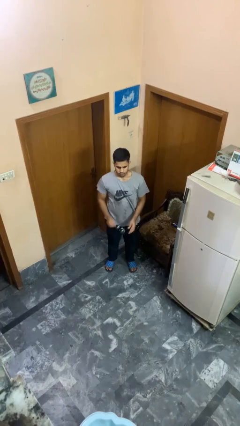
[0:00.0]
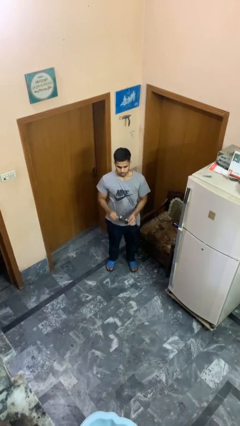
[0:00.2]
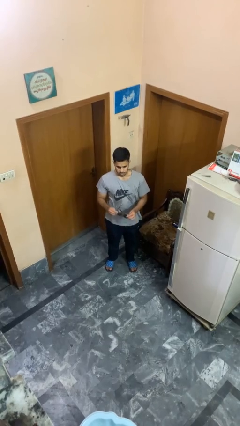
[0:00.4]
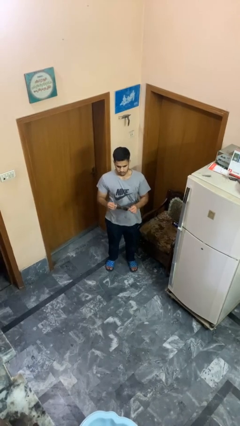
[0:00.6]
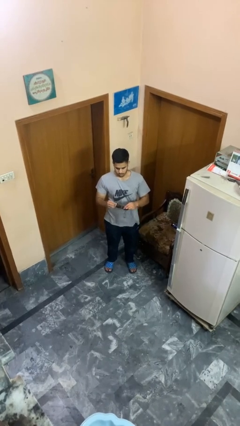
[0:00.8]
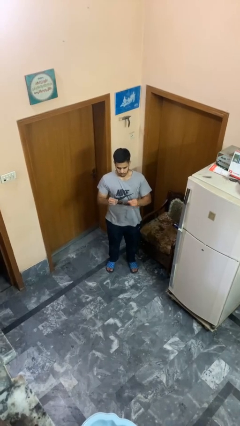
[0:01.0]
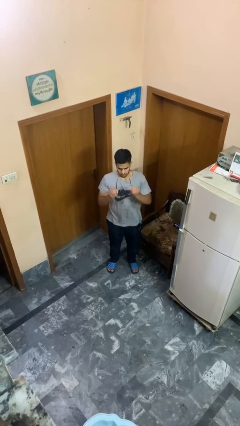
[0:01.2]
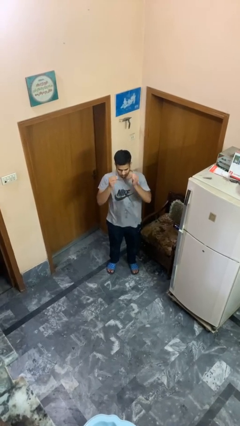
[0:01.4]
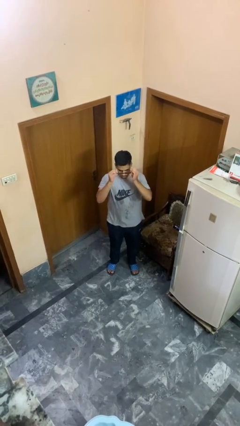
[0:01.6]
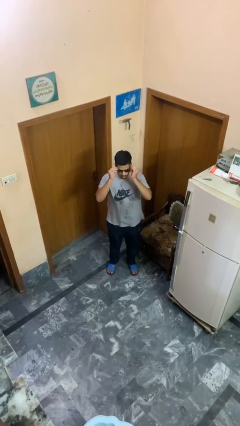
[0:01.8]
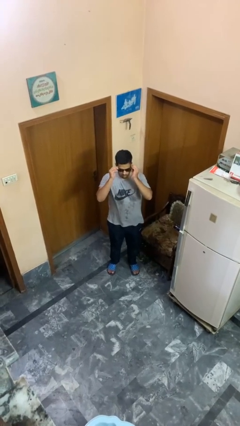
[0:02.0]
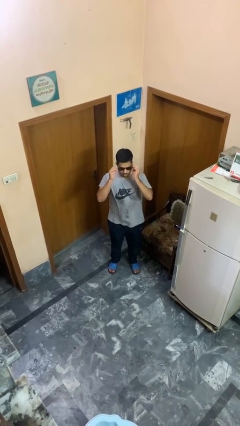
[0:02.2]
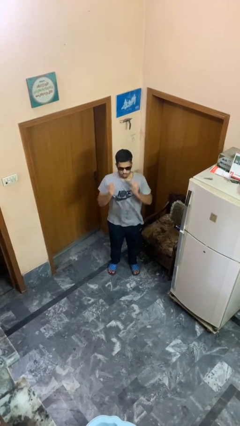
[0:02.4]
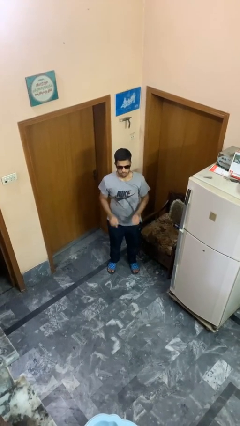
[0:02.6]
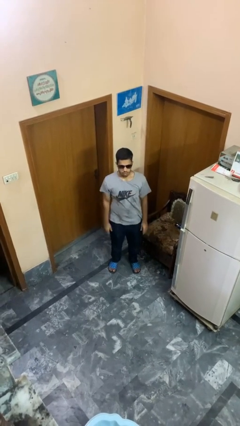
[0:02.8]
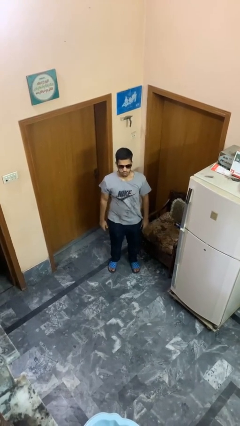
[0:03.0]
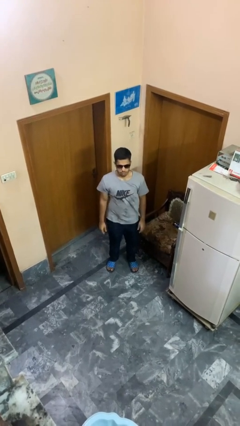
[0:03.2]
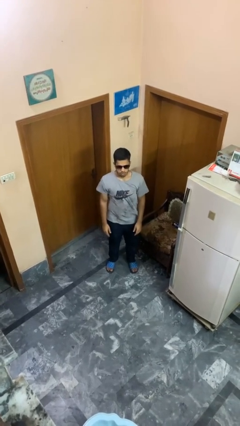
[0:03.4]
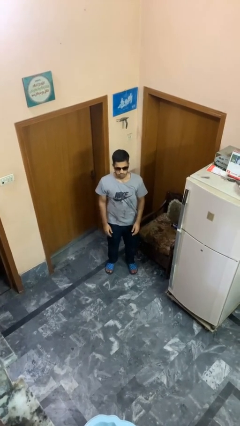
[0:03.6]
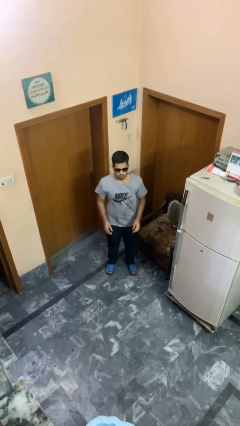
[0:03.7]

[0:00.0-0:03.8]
person puts on sunglasses

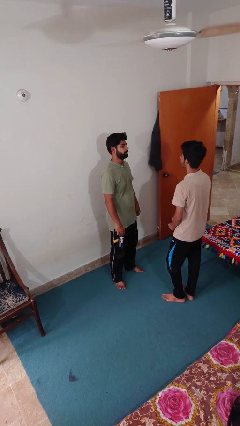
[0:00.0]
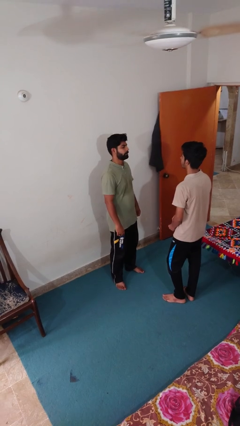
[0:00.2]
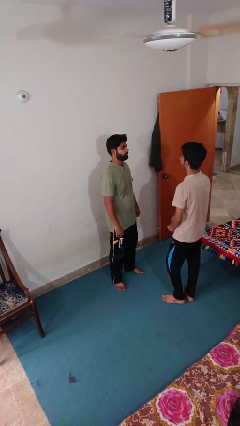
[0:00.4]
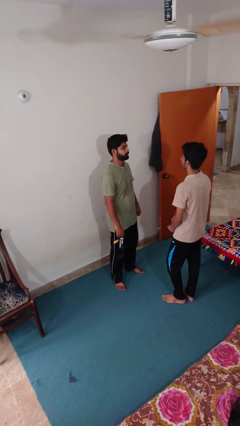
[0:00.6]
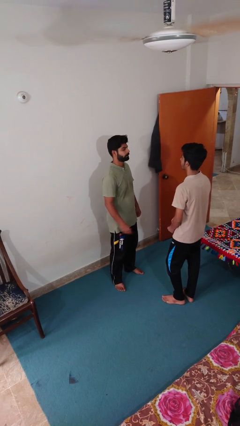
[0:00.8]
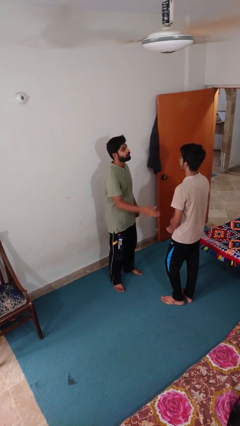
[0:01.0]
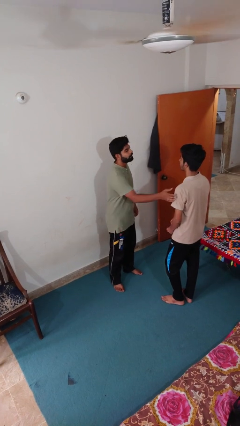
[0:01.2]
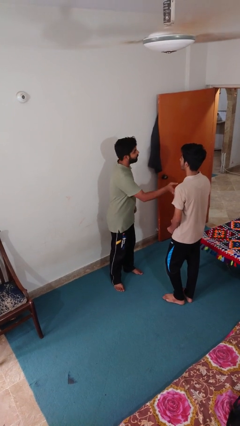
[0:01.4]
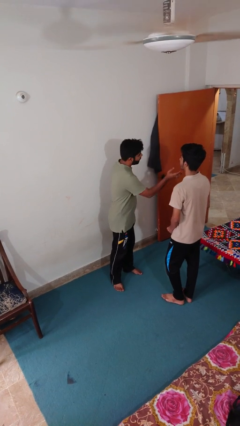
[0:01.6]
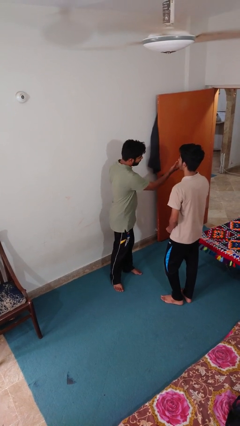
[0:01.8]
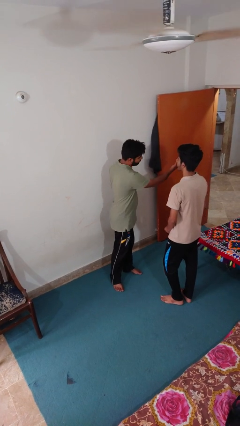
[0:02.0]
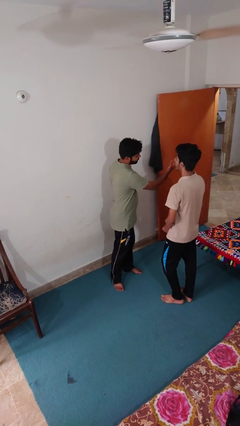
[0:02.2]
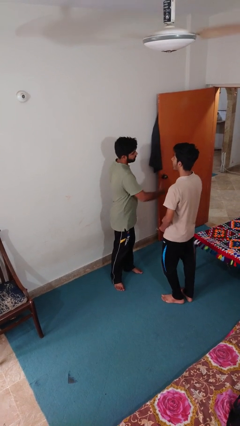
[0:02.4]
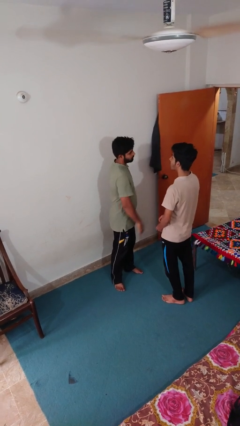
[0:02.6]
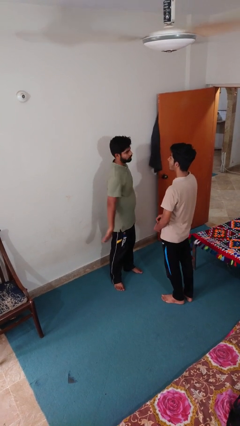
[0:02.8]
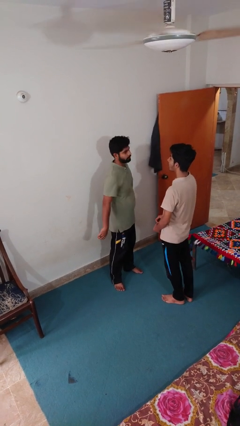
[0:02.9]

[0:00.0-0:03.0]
person shoves person

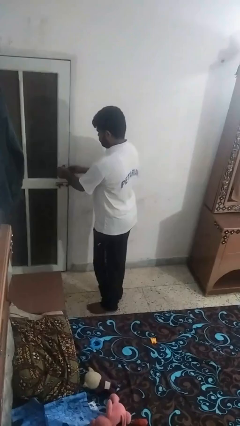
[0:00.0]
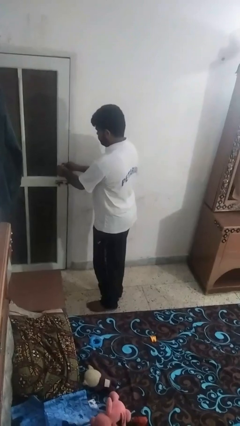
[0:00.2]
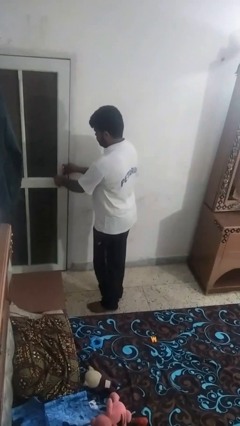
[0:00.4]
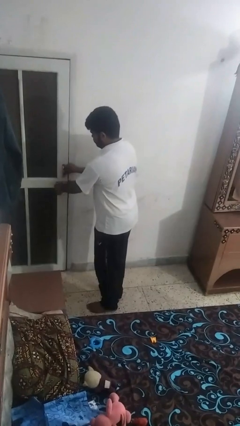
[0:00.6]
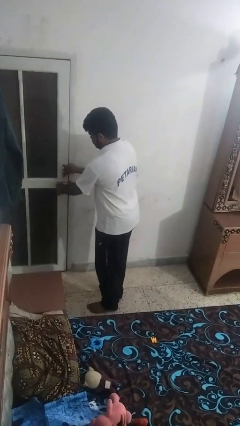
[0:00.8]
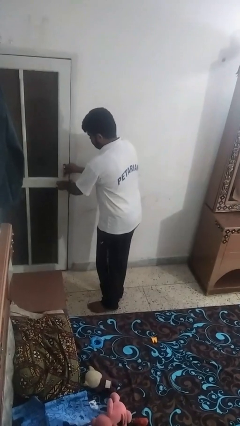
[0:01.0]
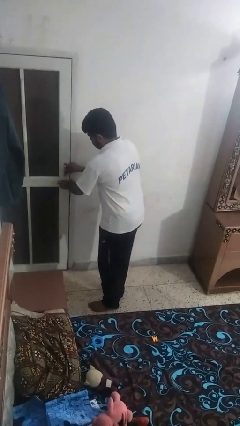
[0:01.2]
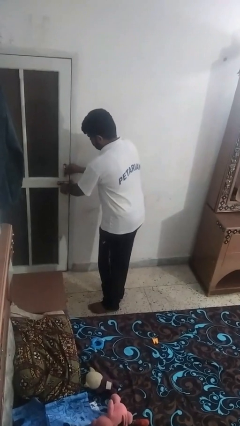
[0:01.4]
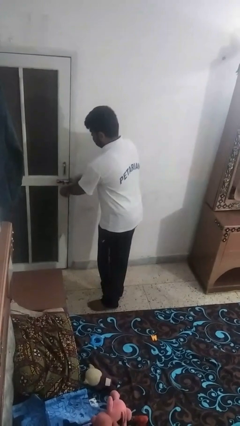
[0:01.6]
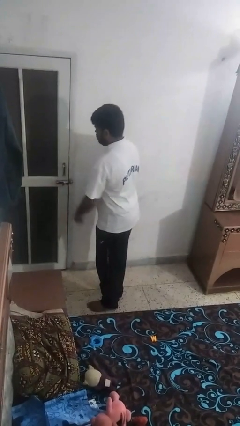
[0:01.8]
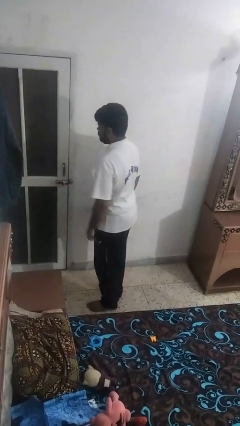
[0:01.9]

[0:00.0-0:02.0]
person locks door with keys

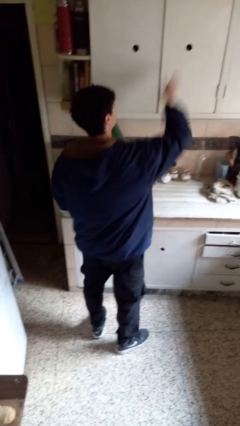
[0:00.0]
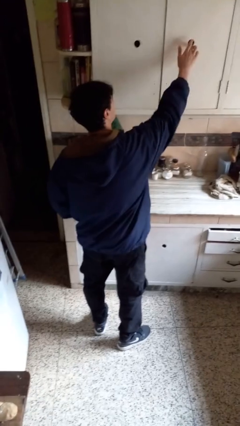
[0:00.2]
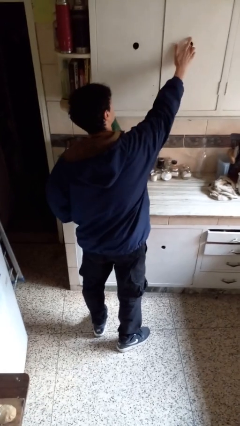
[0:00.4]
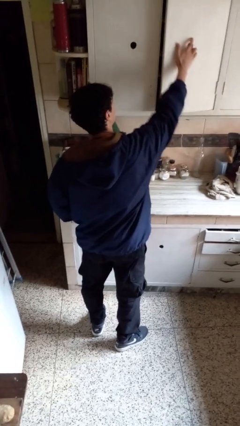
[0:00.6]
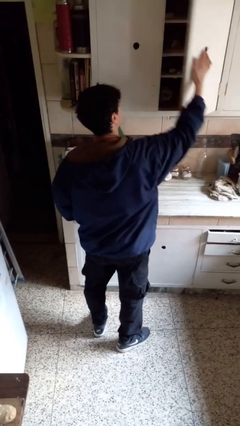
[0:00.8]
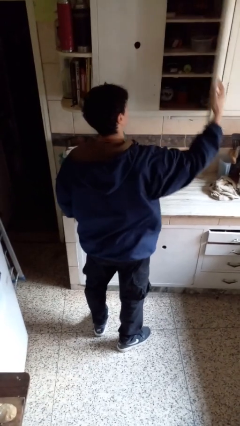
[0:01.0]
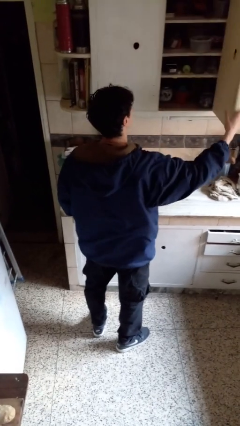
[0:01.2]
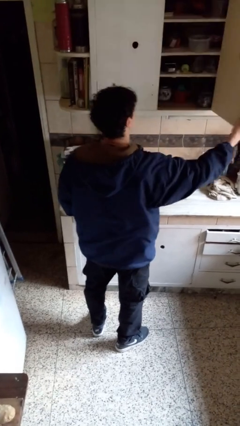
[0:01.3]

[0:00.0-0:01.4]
person opens cabinet

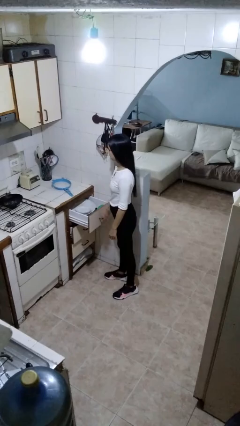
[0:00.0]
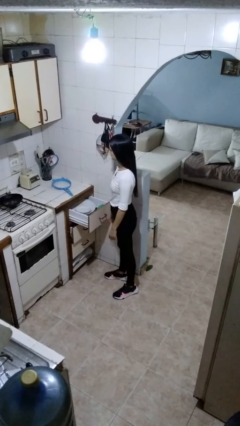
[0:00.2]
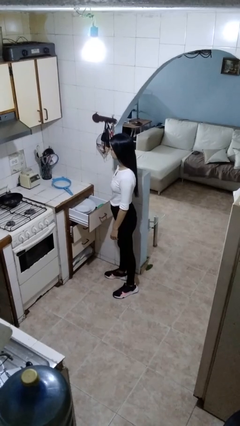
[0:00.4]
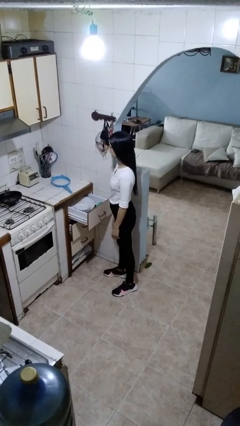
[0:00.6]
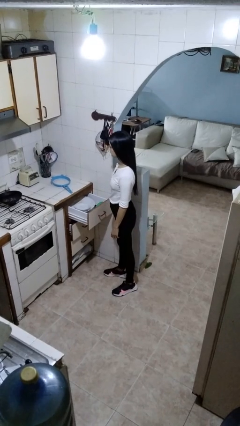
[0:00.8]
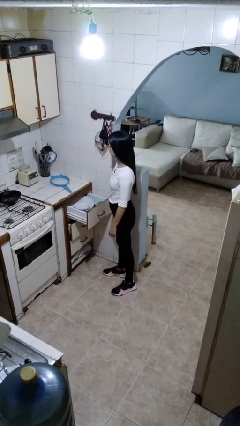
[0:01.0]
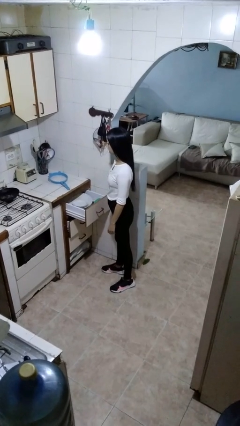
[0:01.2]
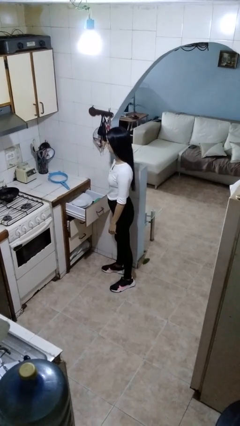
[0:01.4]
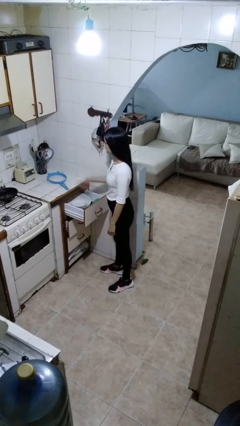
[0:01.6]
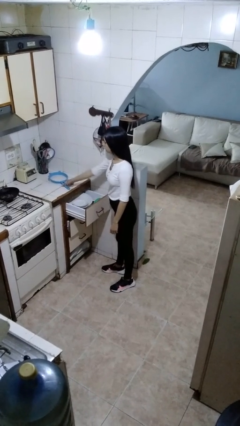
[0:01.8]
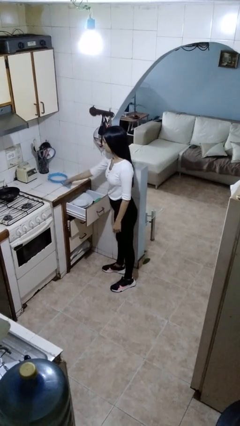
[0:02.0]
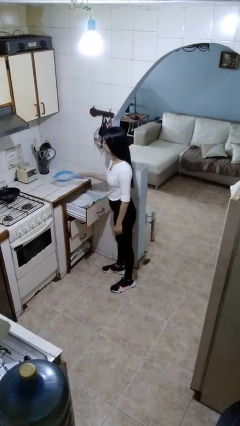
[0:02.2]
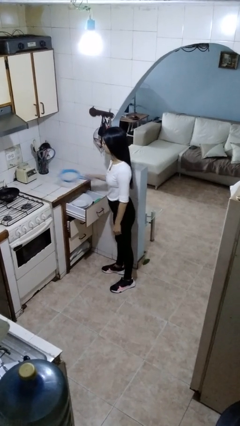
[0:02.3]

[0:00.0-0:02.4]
person puts object into kitchen drawer

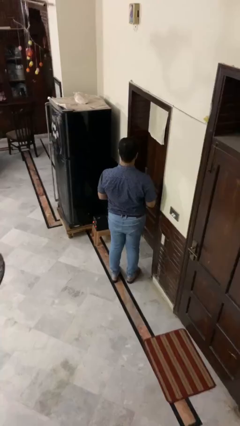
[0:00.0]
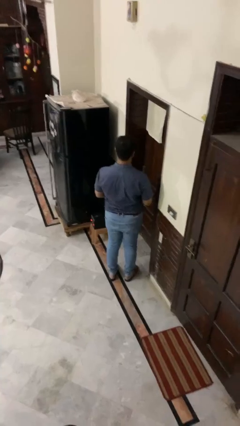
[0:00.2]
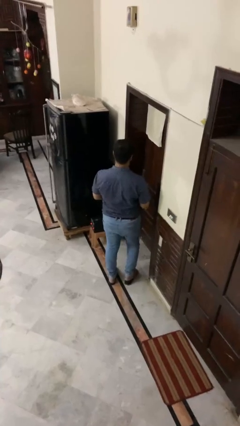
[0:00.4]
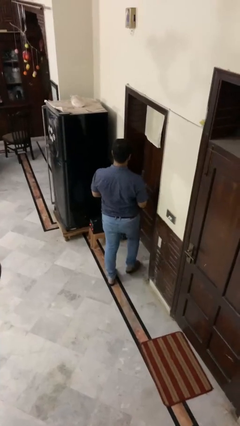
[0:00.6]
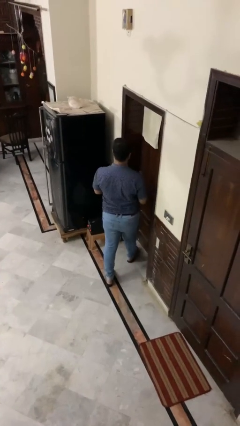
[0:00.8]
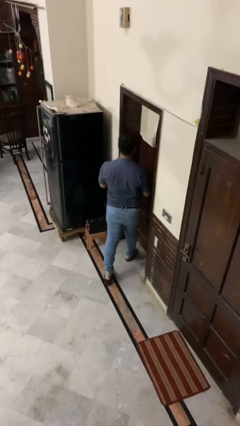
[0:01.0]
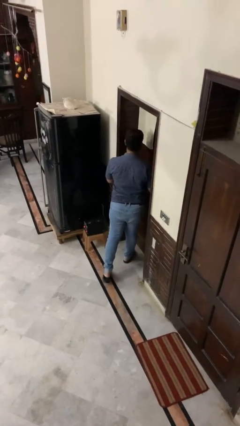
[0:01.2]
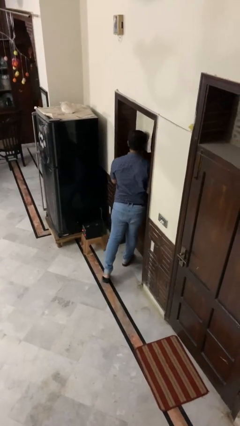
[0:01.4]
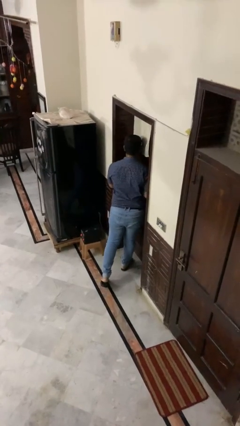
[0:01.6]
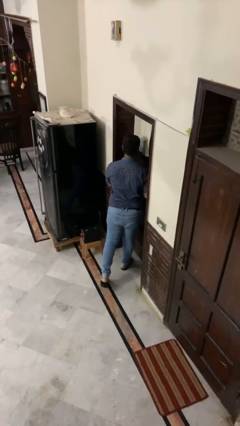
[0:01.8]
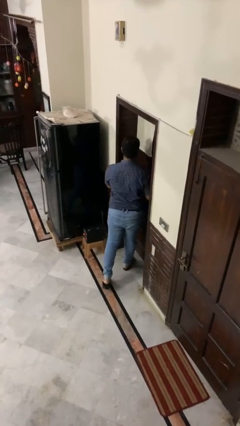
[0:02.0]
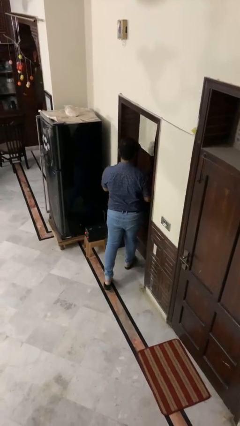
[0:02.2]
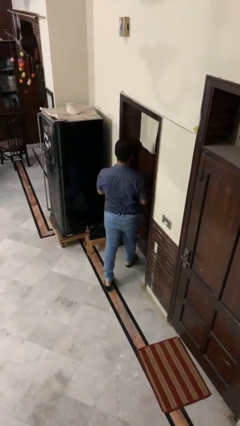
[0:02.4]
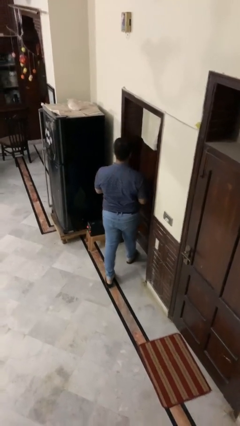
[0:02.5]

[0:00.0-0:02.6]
person bumps into wall

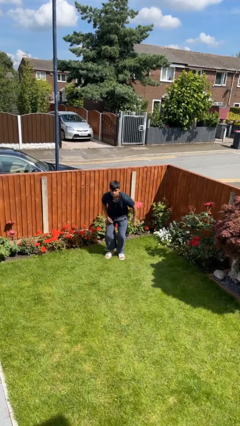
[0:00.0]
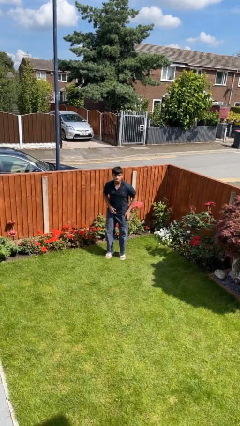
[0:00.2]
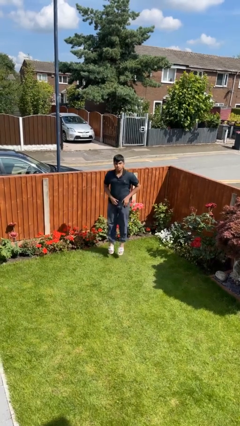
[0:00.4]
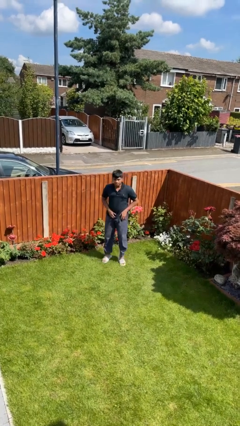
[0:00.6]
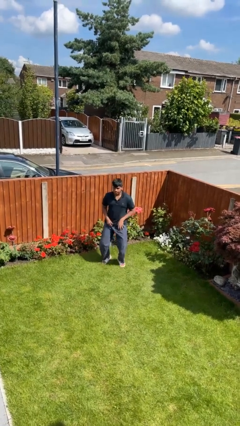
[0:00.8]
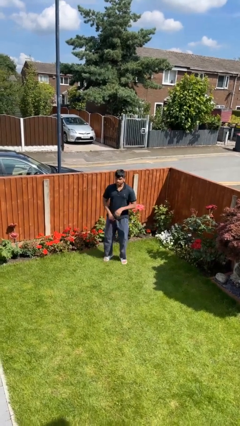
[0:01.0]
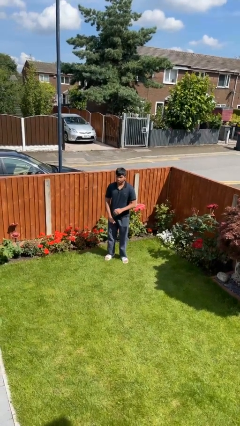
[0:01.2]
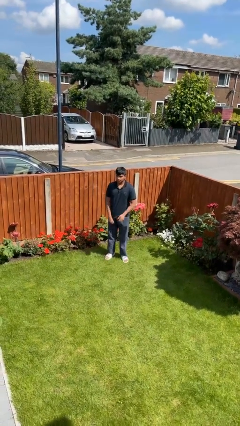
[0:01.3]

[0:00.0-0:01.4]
person jumps

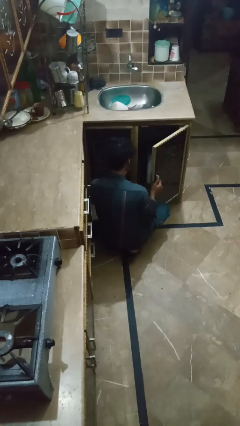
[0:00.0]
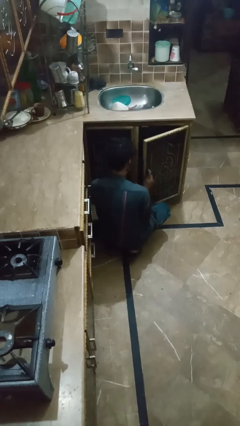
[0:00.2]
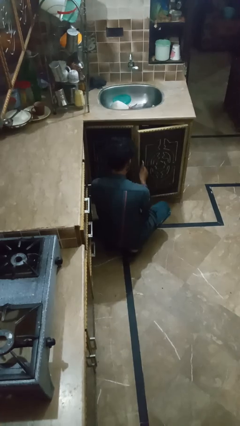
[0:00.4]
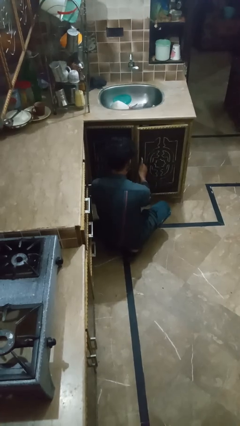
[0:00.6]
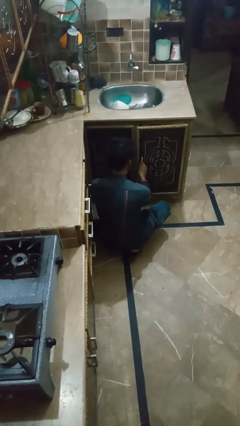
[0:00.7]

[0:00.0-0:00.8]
person closes kitchen drawer
